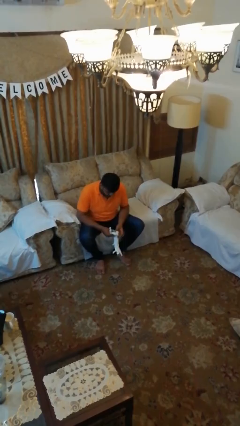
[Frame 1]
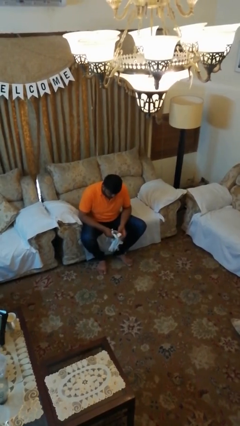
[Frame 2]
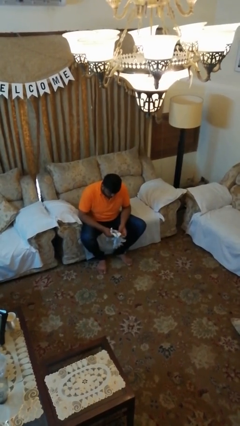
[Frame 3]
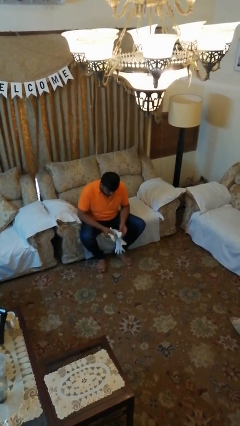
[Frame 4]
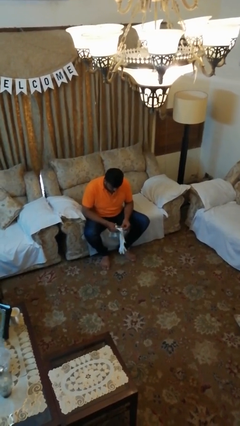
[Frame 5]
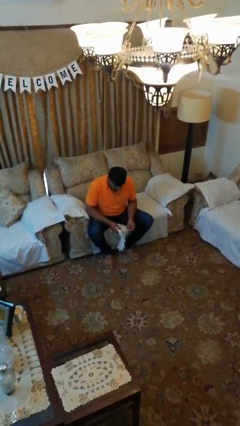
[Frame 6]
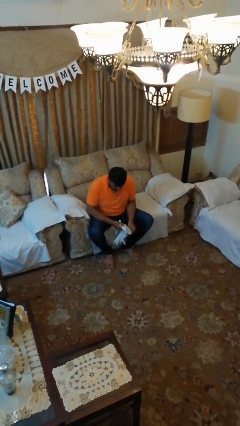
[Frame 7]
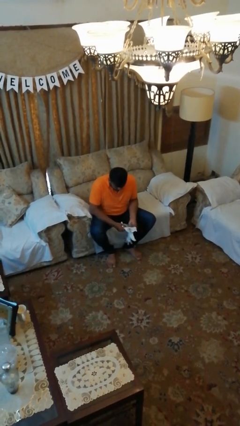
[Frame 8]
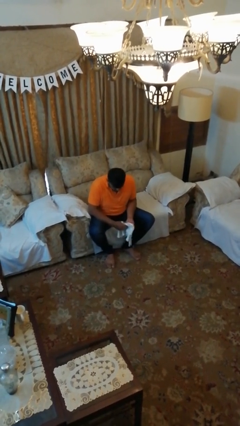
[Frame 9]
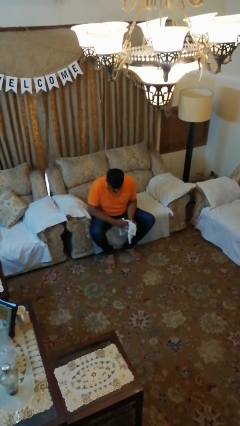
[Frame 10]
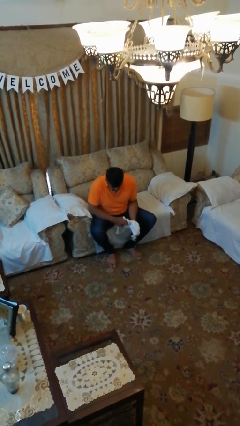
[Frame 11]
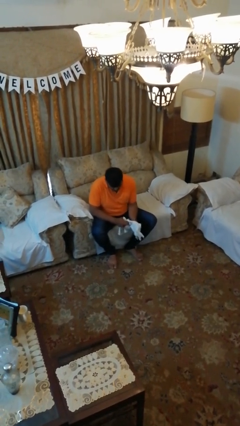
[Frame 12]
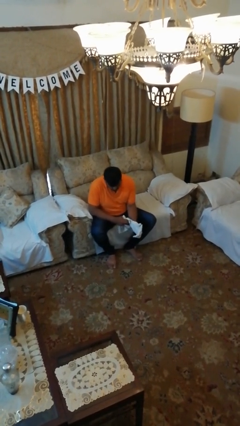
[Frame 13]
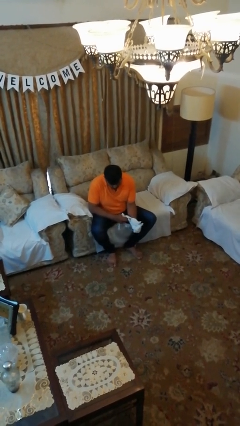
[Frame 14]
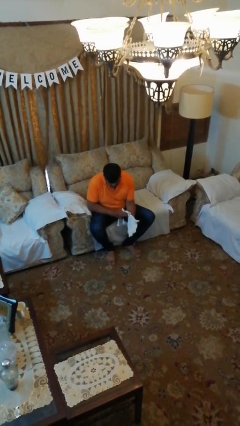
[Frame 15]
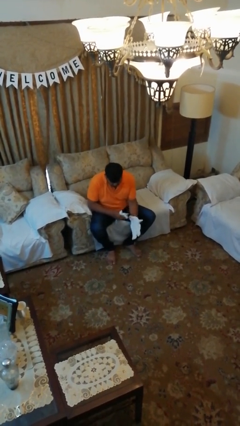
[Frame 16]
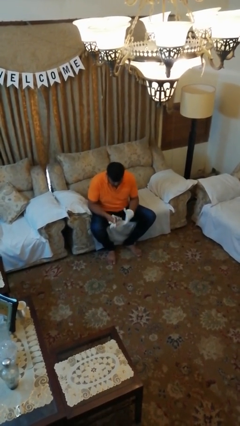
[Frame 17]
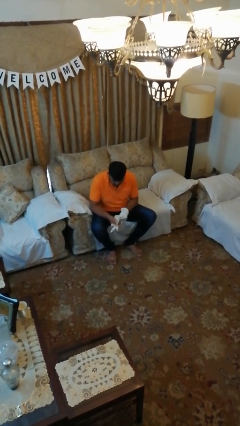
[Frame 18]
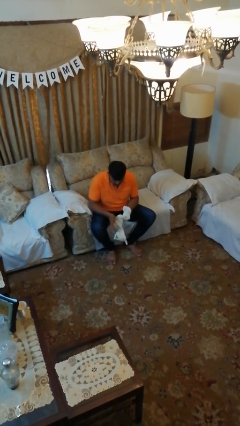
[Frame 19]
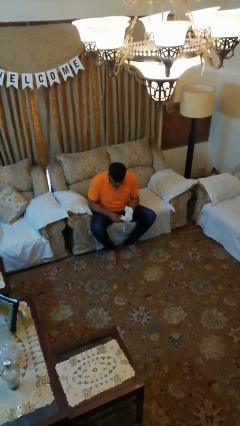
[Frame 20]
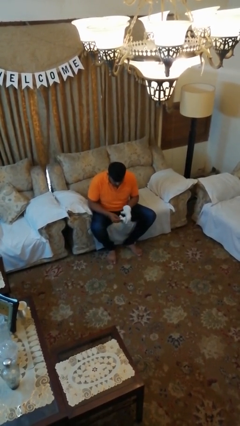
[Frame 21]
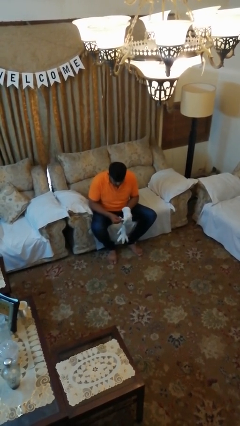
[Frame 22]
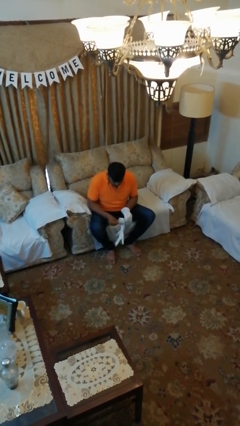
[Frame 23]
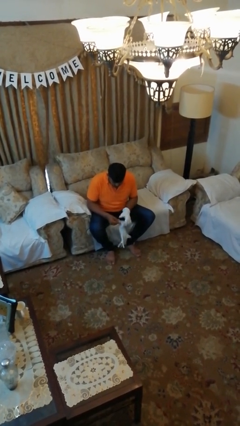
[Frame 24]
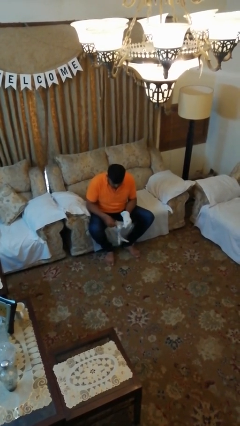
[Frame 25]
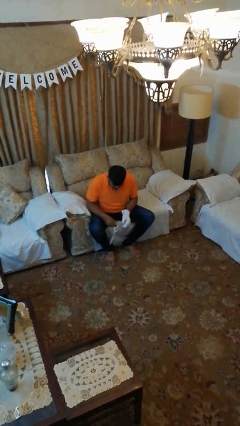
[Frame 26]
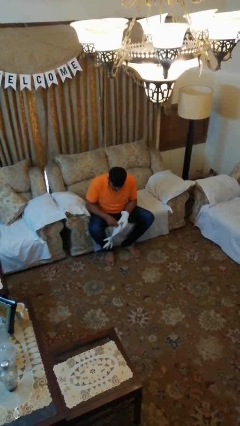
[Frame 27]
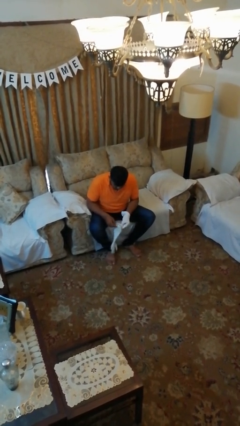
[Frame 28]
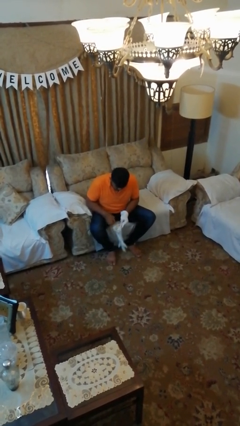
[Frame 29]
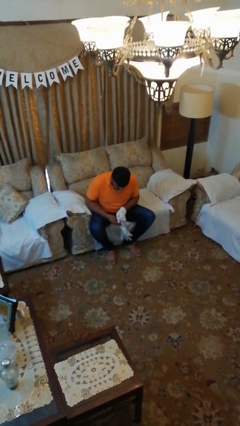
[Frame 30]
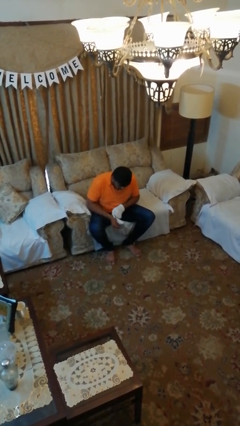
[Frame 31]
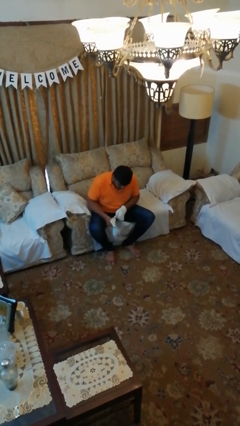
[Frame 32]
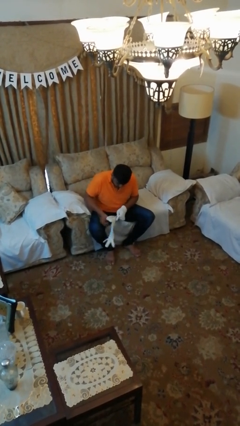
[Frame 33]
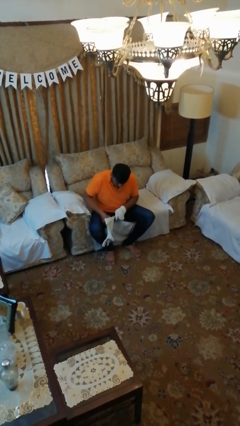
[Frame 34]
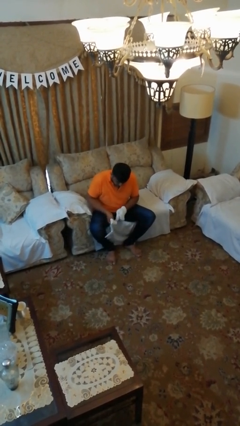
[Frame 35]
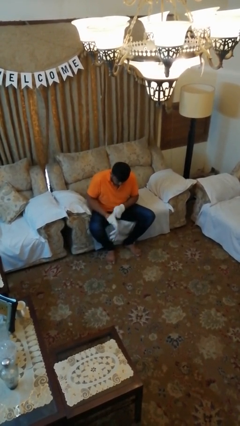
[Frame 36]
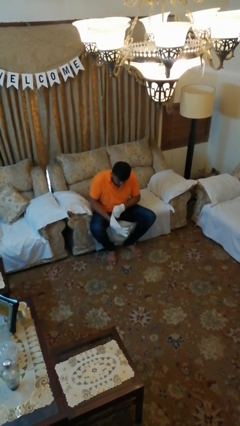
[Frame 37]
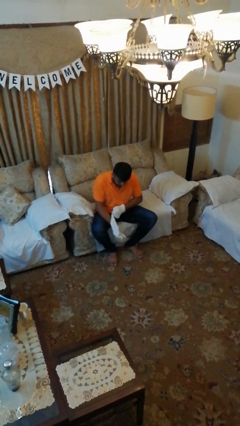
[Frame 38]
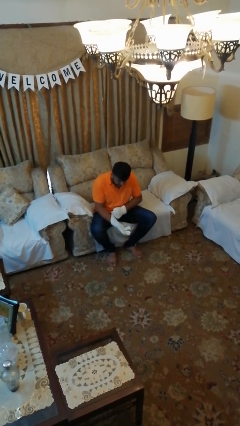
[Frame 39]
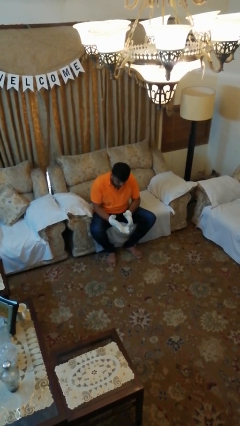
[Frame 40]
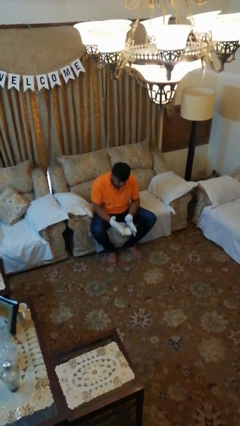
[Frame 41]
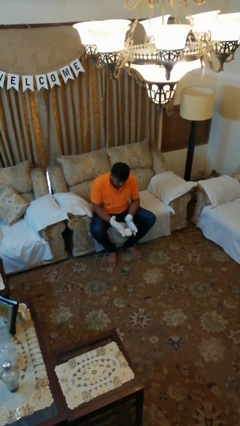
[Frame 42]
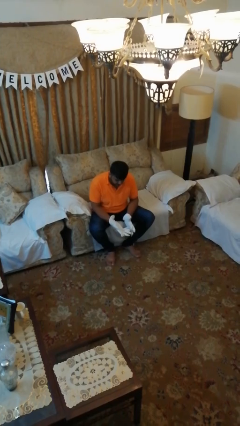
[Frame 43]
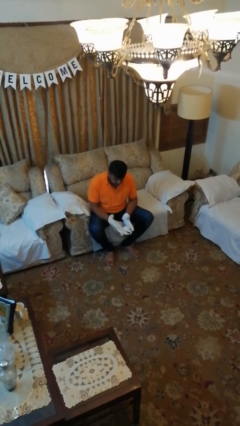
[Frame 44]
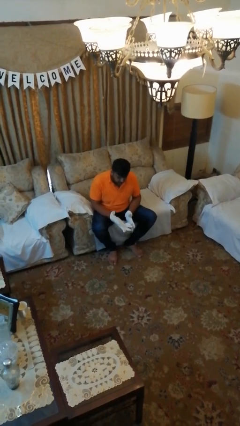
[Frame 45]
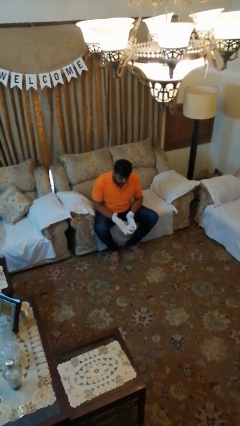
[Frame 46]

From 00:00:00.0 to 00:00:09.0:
person puts on gloves

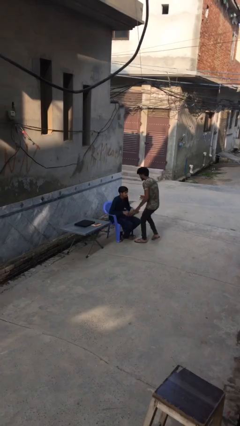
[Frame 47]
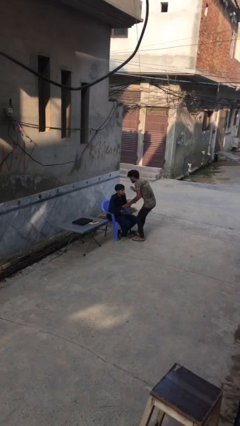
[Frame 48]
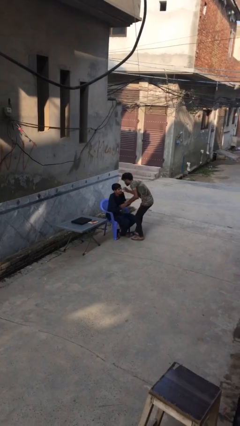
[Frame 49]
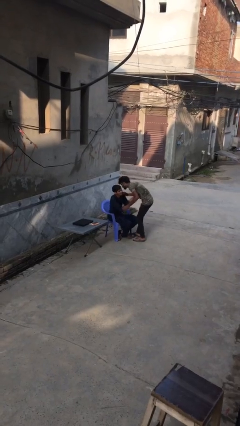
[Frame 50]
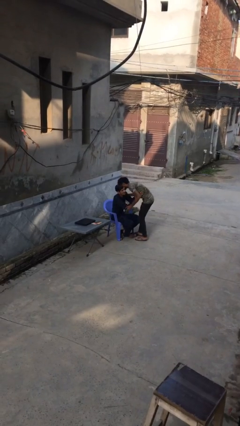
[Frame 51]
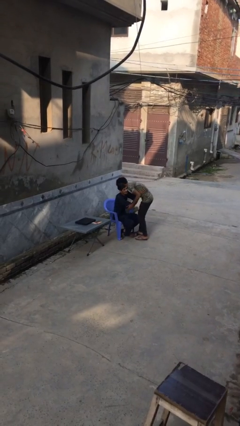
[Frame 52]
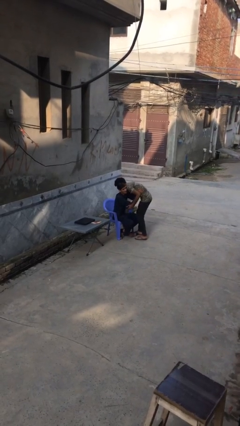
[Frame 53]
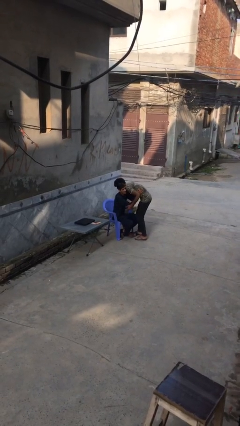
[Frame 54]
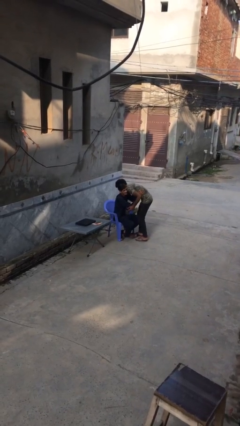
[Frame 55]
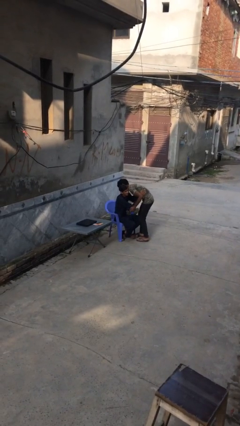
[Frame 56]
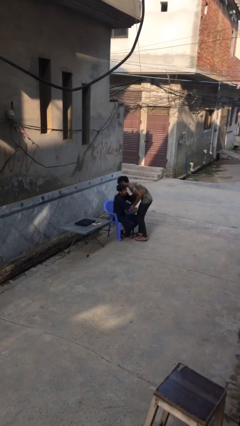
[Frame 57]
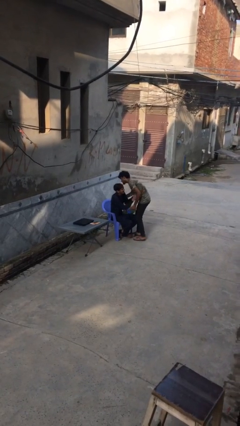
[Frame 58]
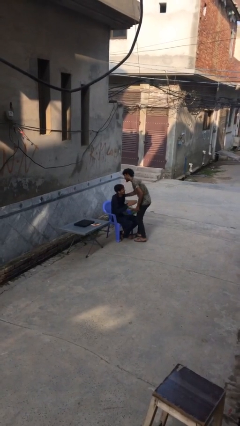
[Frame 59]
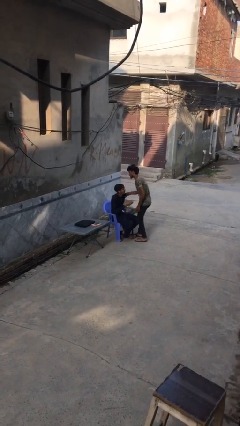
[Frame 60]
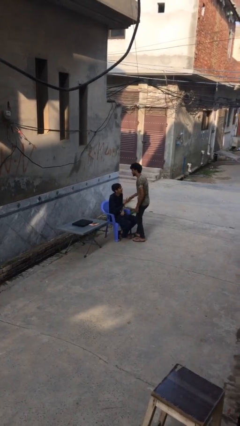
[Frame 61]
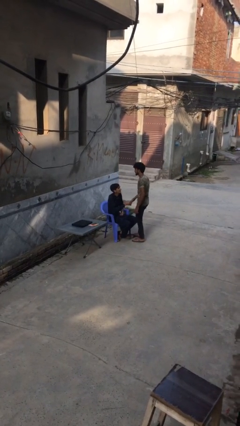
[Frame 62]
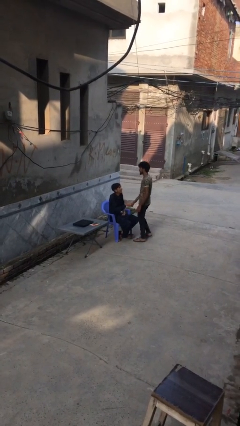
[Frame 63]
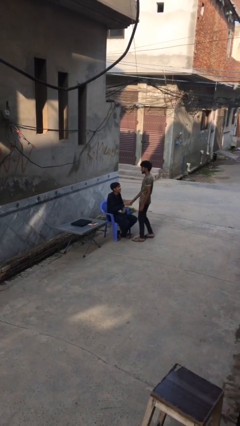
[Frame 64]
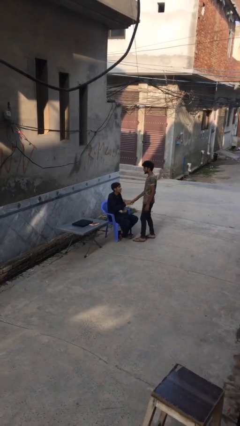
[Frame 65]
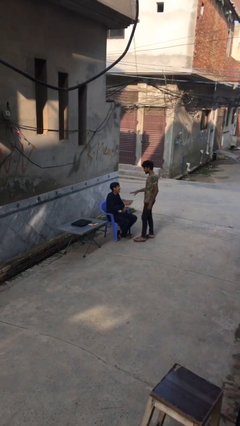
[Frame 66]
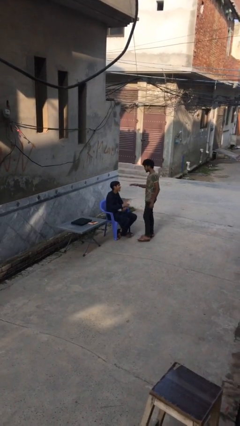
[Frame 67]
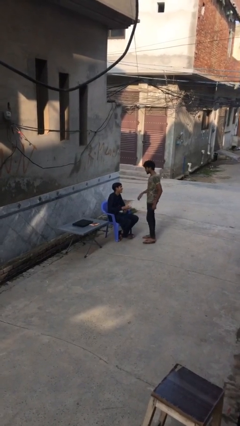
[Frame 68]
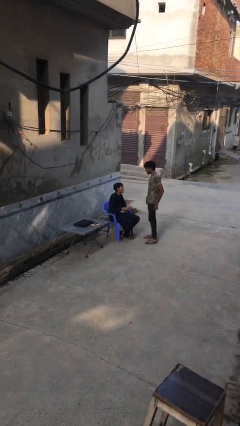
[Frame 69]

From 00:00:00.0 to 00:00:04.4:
person embraces person

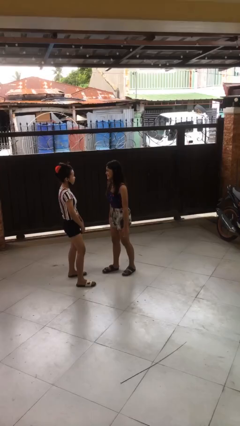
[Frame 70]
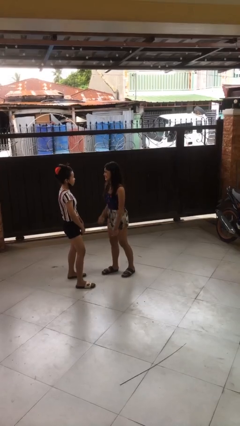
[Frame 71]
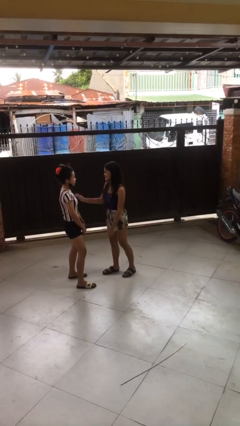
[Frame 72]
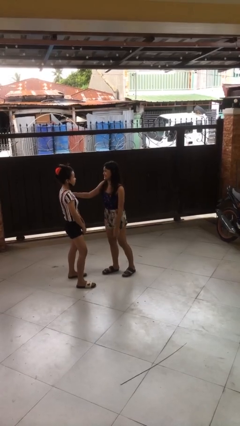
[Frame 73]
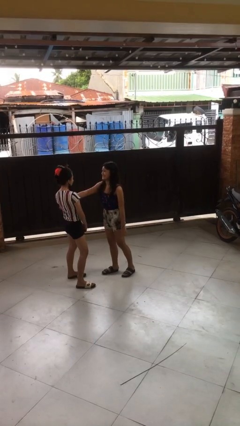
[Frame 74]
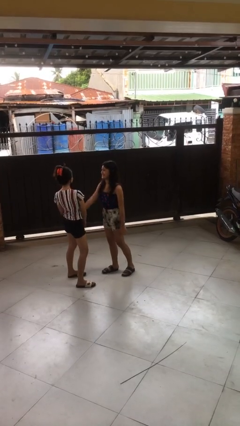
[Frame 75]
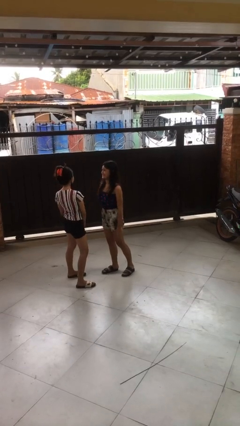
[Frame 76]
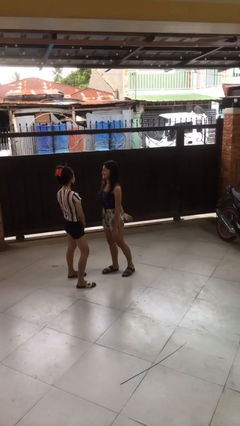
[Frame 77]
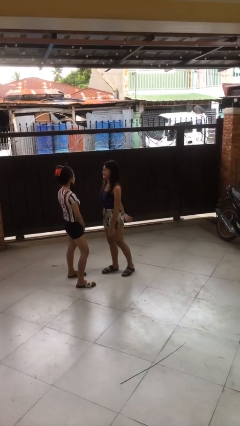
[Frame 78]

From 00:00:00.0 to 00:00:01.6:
person shoves person

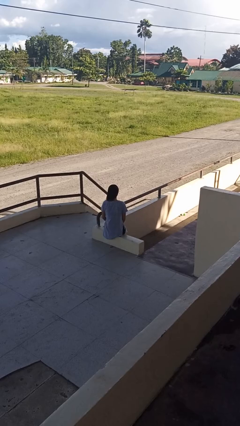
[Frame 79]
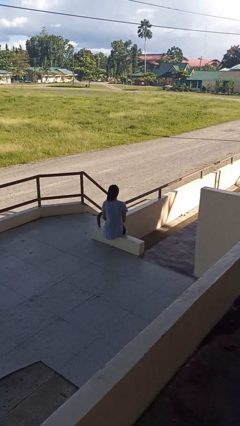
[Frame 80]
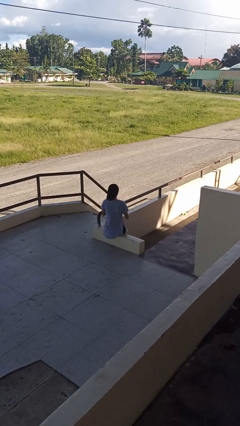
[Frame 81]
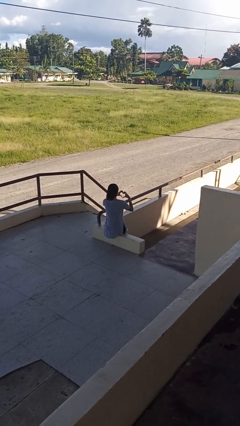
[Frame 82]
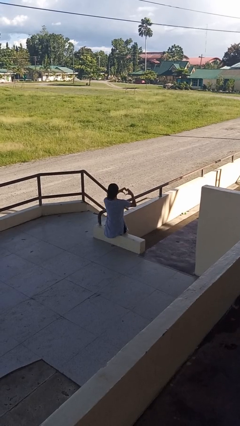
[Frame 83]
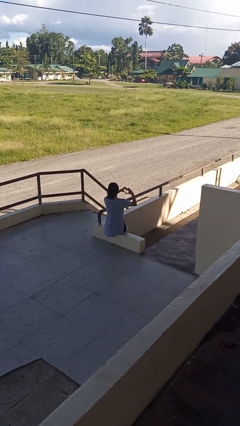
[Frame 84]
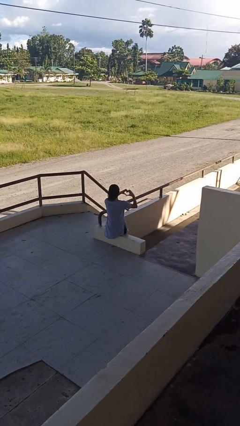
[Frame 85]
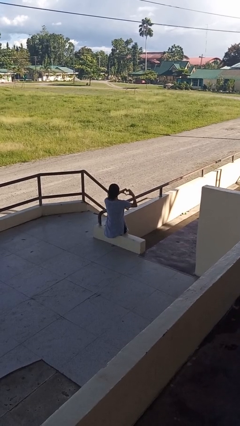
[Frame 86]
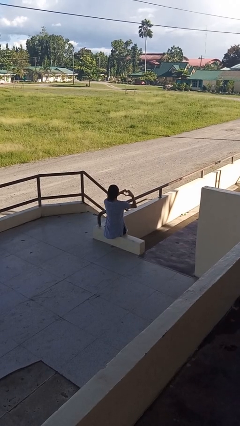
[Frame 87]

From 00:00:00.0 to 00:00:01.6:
person gestures heart

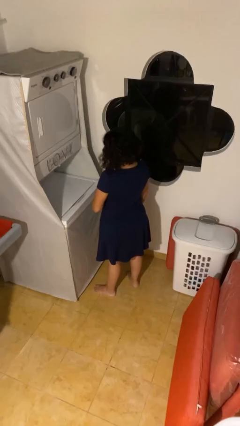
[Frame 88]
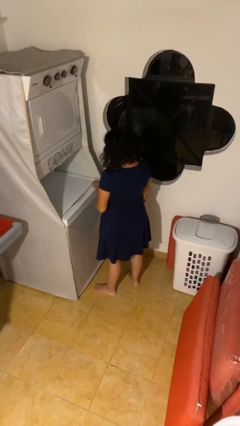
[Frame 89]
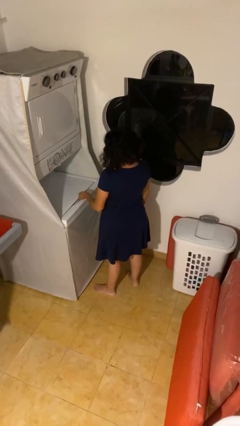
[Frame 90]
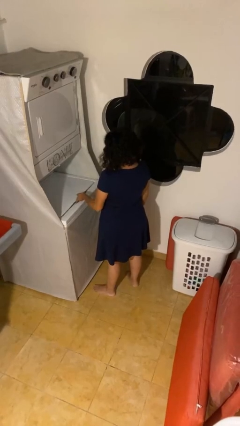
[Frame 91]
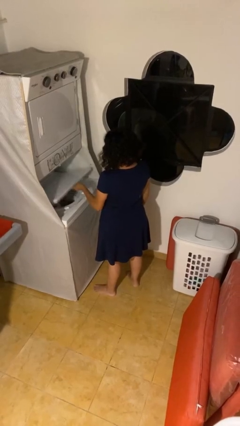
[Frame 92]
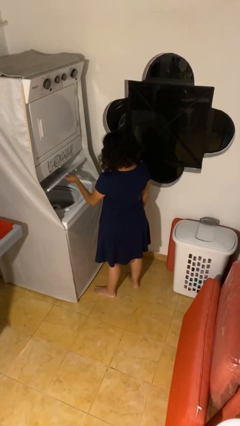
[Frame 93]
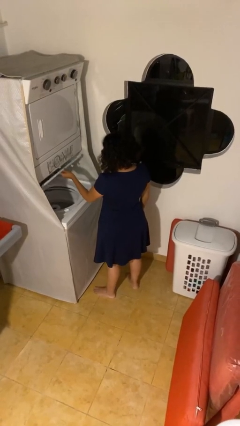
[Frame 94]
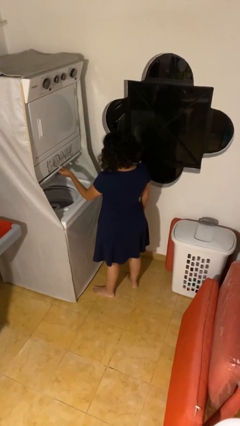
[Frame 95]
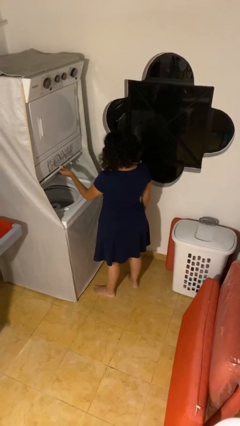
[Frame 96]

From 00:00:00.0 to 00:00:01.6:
person opens clothes washer
